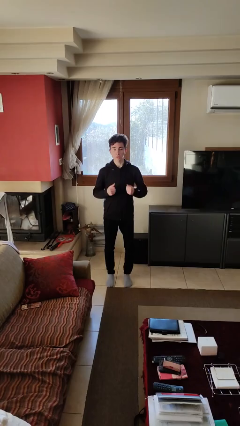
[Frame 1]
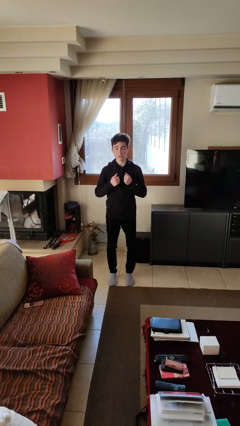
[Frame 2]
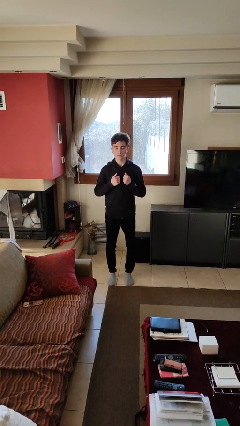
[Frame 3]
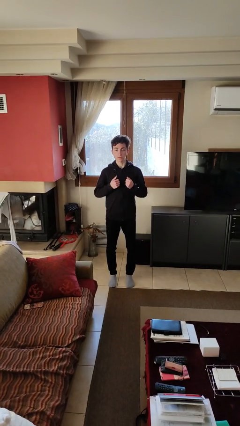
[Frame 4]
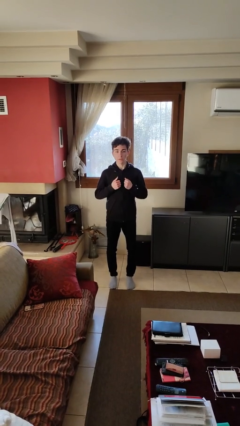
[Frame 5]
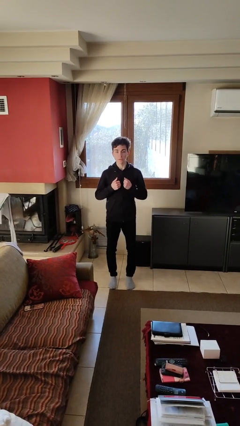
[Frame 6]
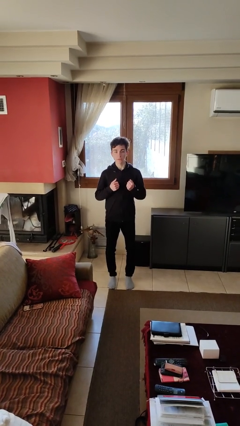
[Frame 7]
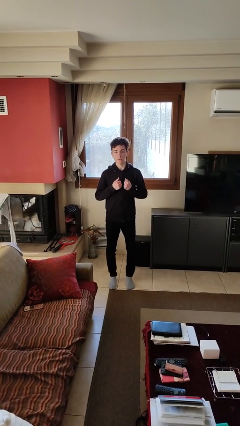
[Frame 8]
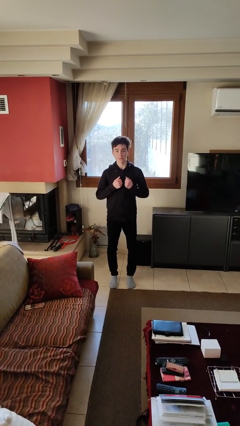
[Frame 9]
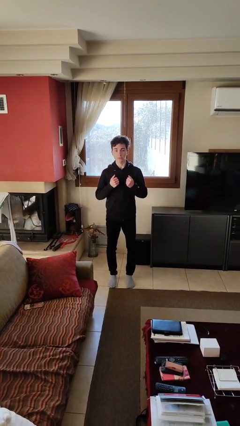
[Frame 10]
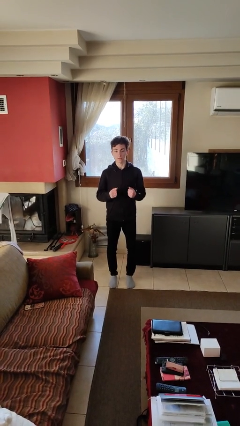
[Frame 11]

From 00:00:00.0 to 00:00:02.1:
person drums on chest

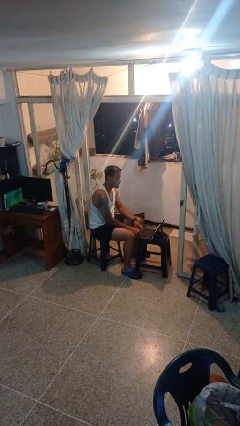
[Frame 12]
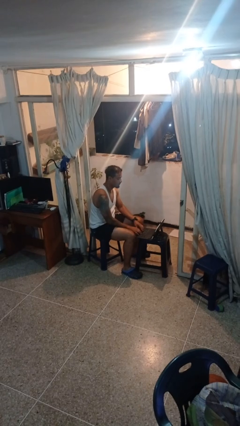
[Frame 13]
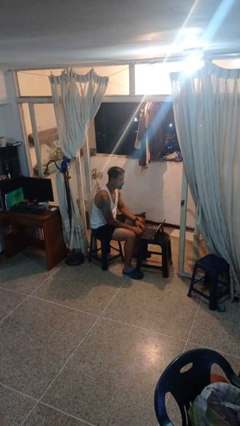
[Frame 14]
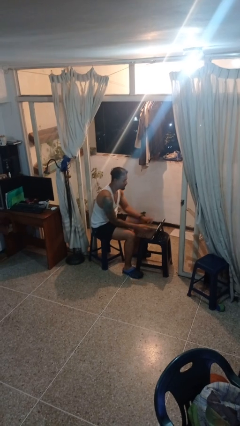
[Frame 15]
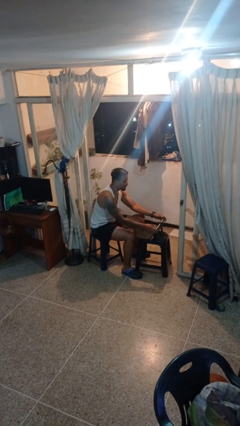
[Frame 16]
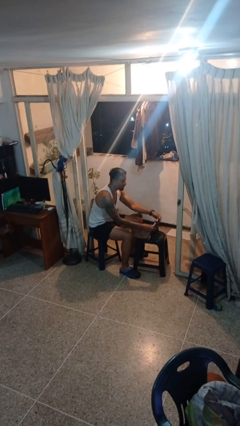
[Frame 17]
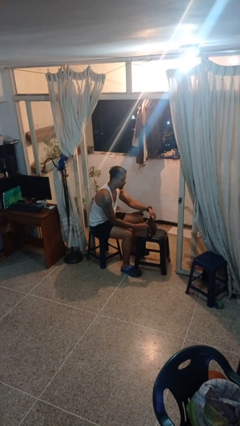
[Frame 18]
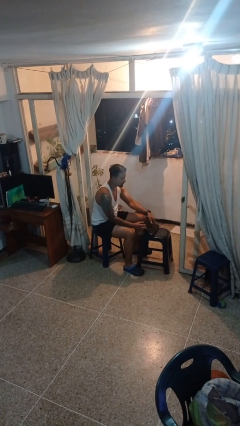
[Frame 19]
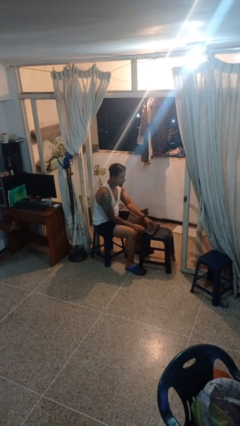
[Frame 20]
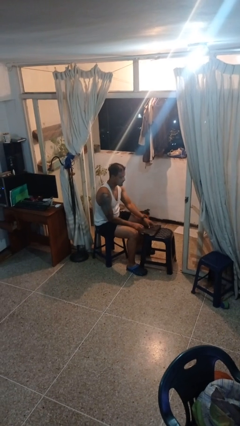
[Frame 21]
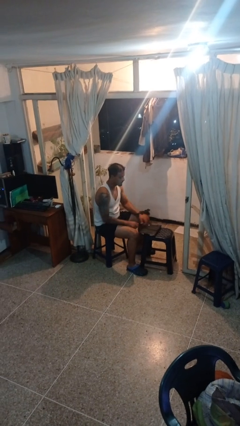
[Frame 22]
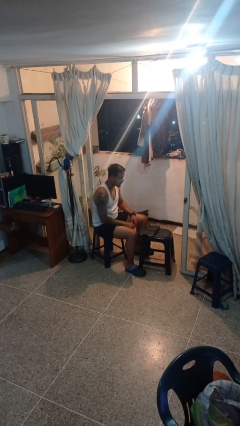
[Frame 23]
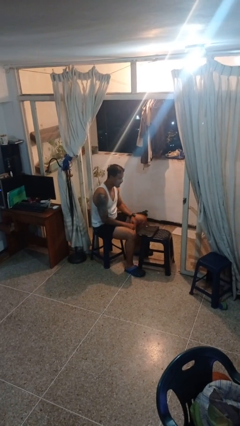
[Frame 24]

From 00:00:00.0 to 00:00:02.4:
person closes laptop

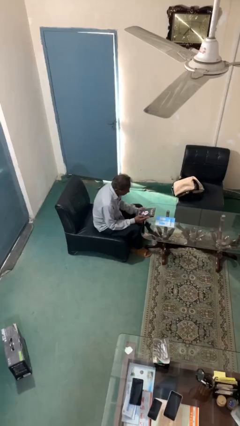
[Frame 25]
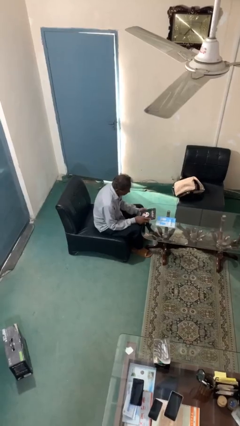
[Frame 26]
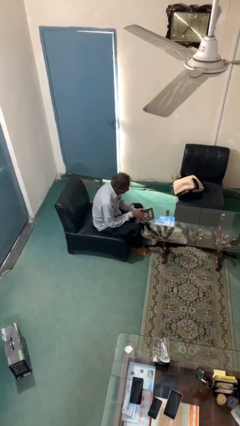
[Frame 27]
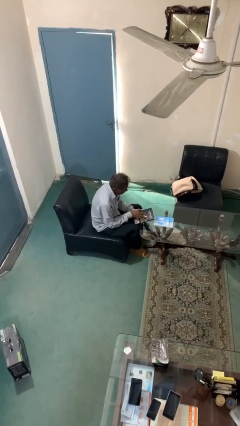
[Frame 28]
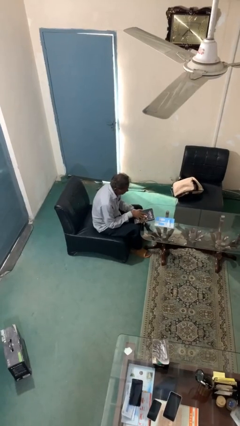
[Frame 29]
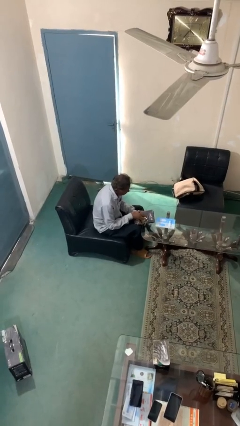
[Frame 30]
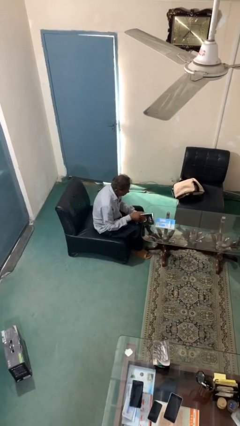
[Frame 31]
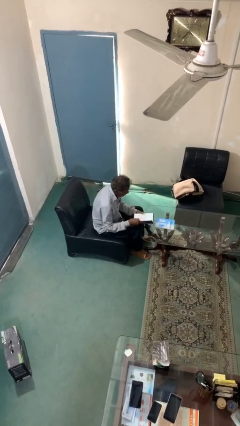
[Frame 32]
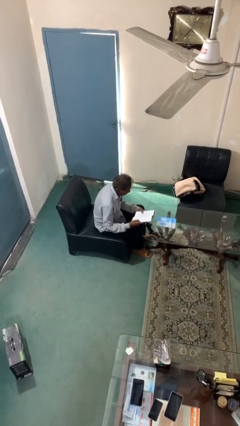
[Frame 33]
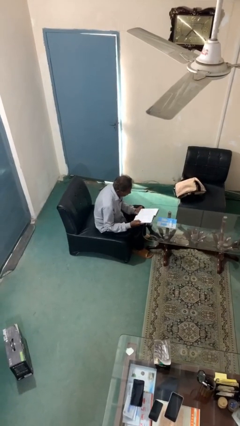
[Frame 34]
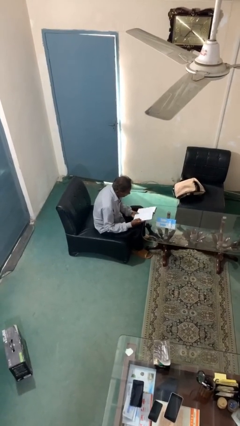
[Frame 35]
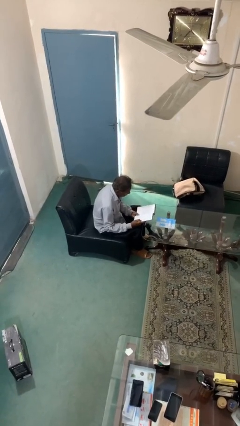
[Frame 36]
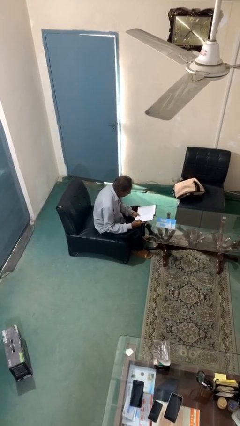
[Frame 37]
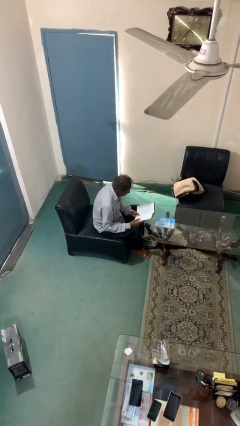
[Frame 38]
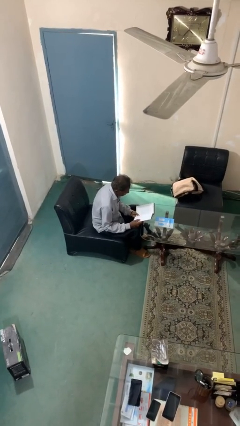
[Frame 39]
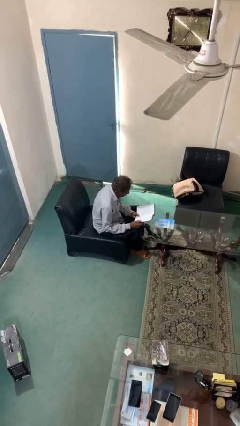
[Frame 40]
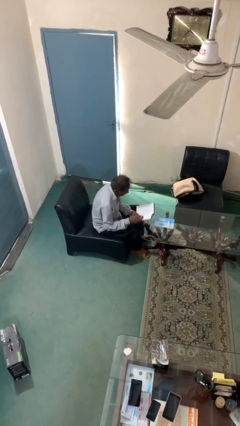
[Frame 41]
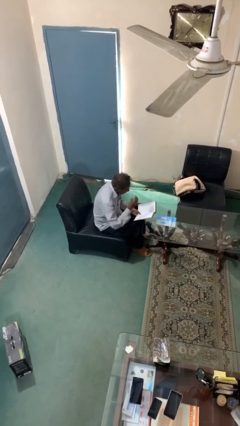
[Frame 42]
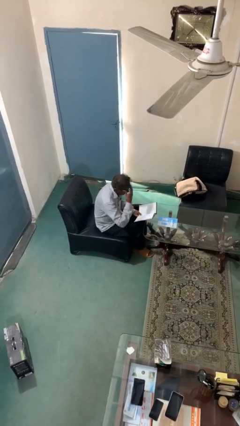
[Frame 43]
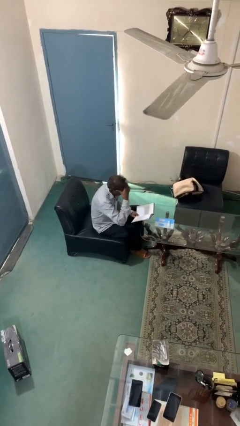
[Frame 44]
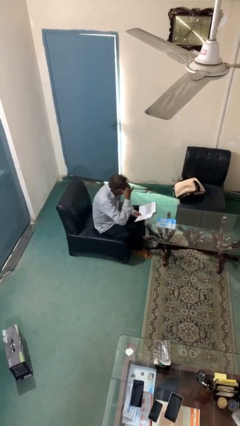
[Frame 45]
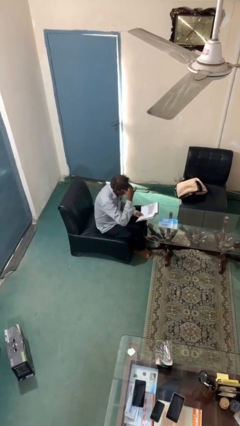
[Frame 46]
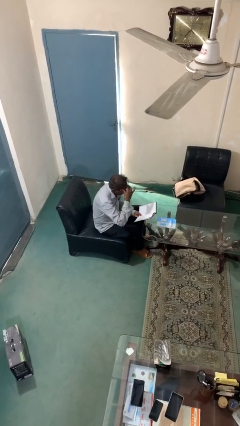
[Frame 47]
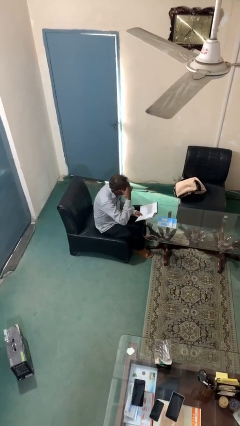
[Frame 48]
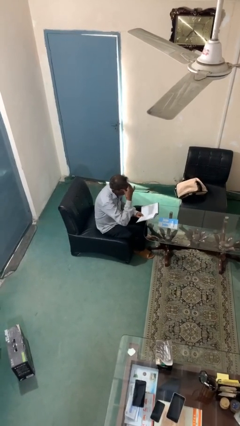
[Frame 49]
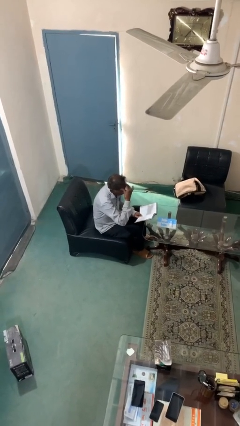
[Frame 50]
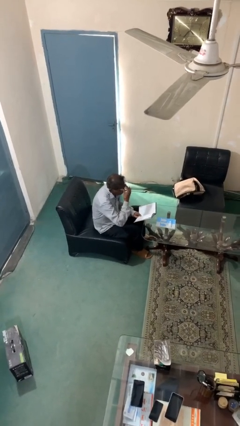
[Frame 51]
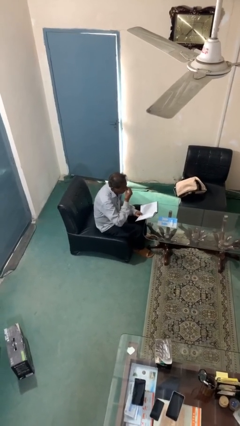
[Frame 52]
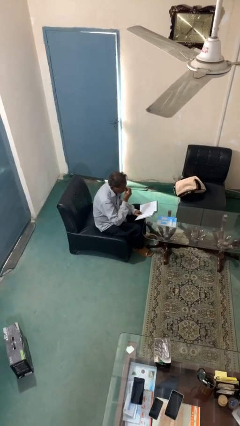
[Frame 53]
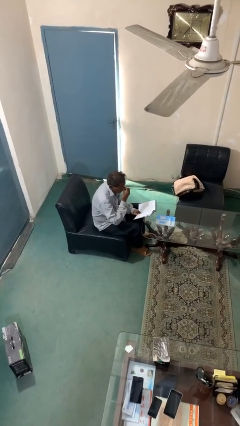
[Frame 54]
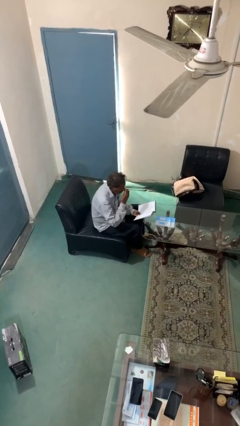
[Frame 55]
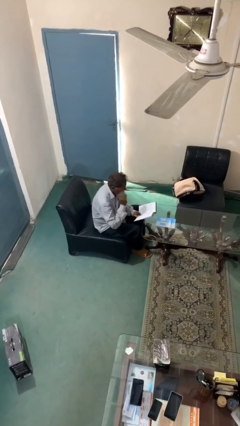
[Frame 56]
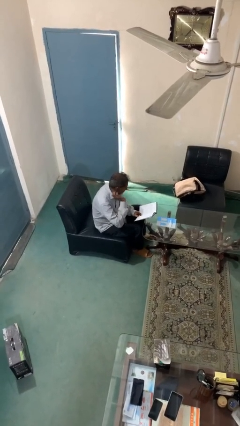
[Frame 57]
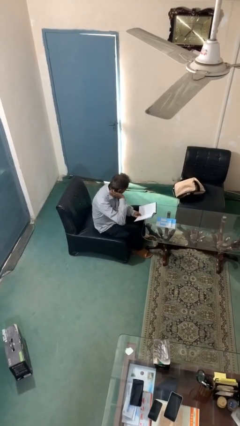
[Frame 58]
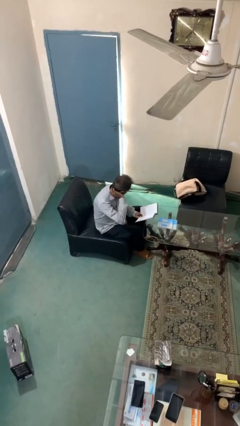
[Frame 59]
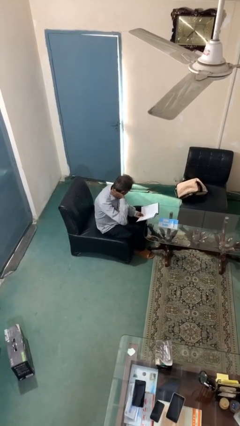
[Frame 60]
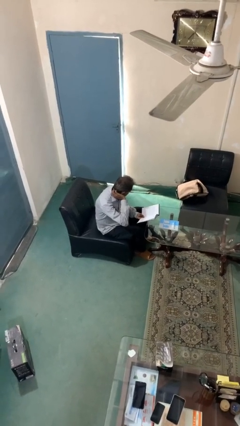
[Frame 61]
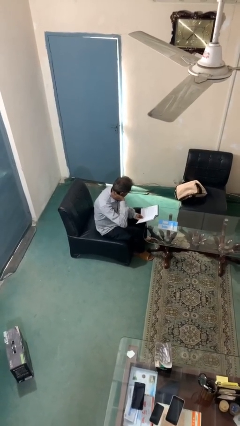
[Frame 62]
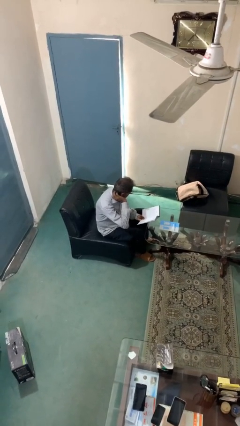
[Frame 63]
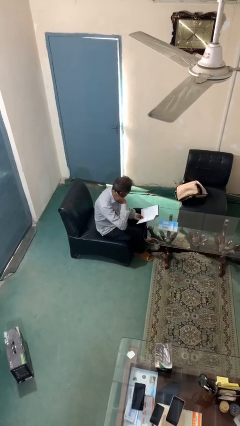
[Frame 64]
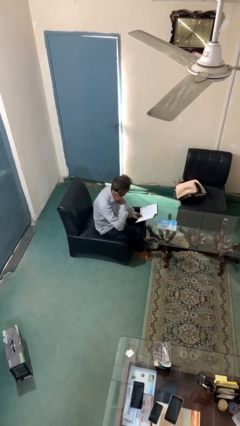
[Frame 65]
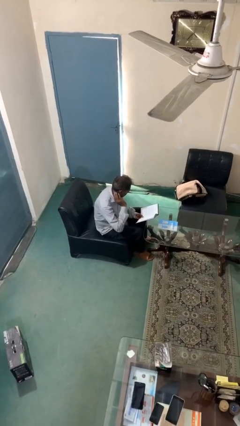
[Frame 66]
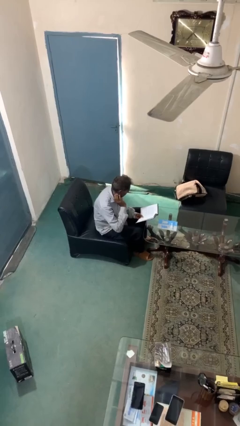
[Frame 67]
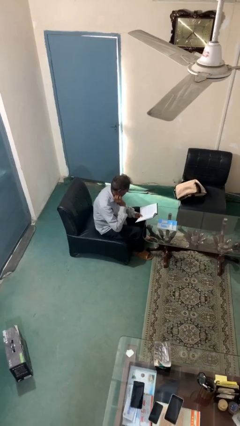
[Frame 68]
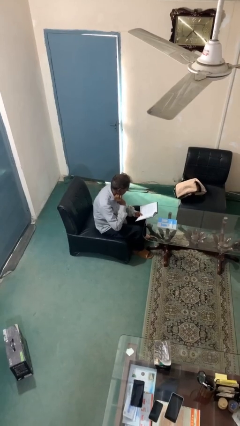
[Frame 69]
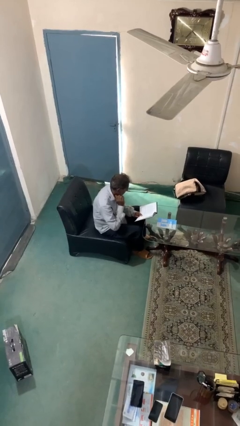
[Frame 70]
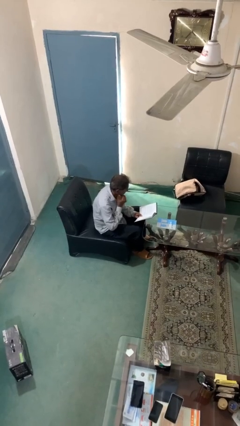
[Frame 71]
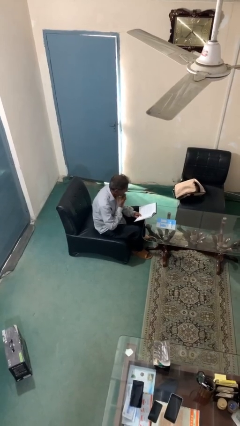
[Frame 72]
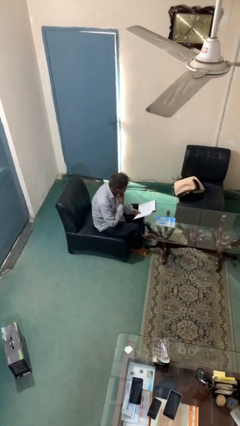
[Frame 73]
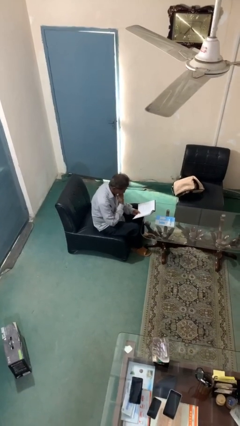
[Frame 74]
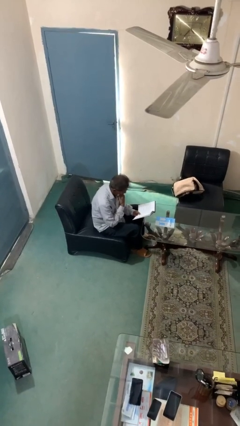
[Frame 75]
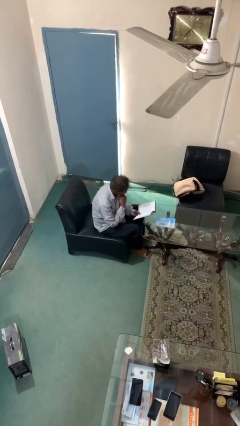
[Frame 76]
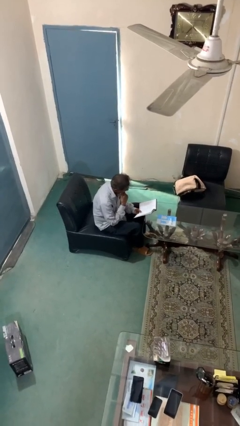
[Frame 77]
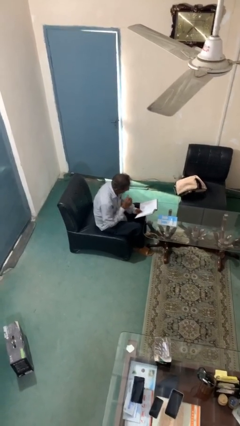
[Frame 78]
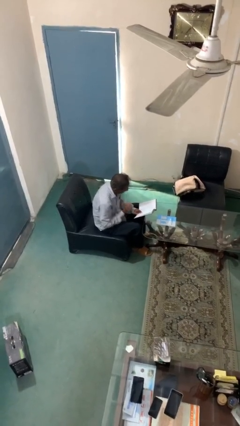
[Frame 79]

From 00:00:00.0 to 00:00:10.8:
person reads document

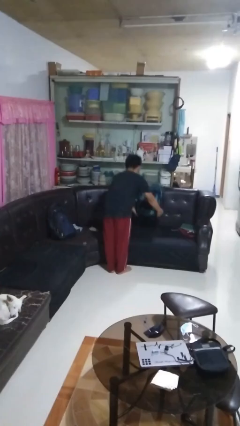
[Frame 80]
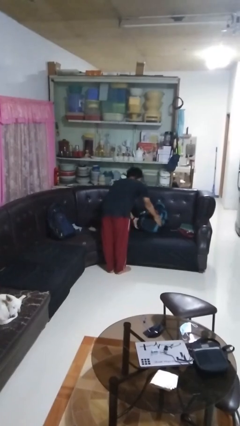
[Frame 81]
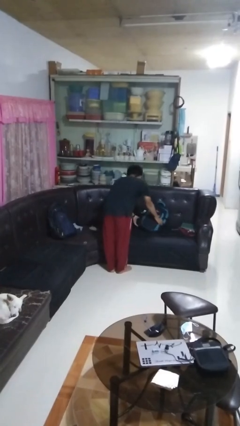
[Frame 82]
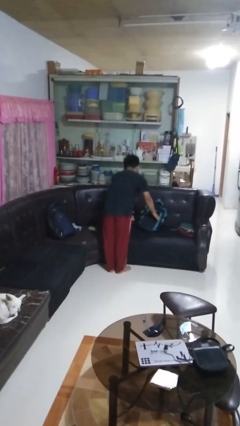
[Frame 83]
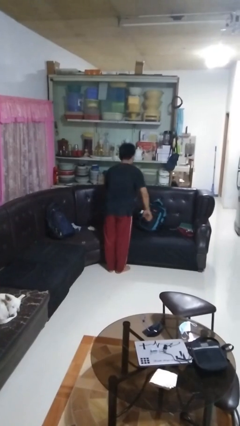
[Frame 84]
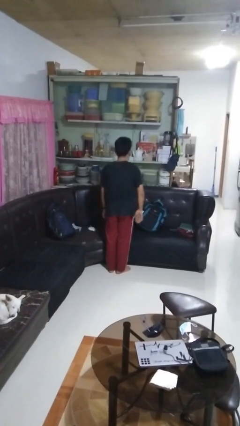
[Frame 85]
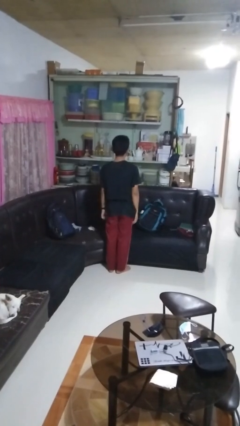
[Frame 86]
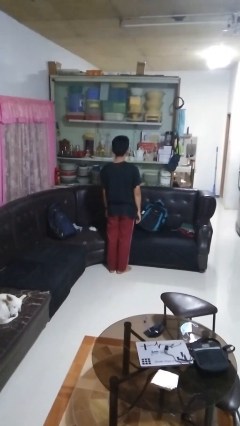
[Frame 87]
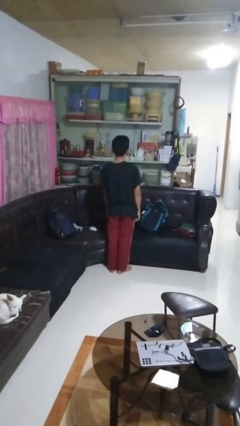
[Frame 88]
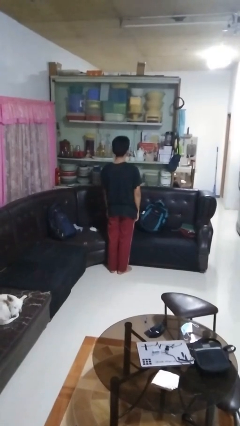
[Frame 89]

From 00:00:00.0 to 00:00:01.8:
person puts down object on couch

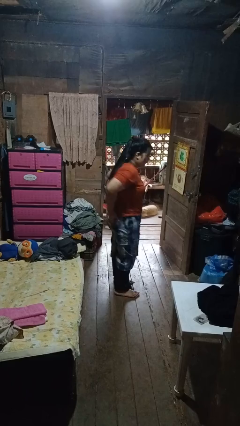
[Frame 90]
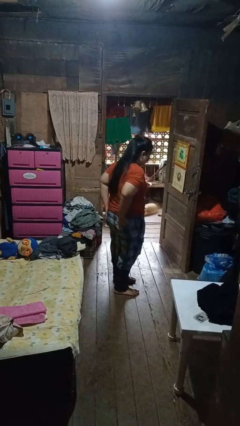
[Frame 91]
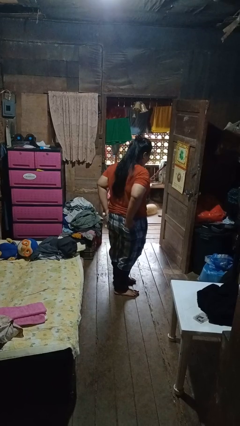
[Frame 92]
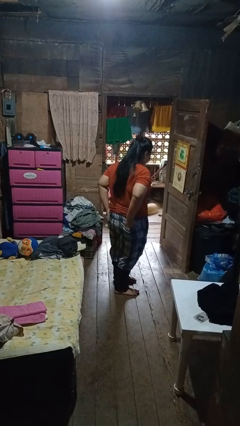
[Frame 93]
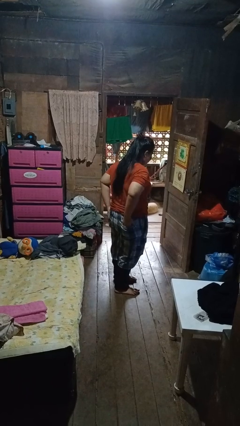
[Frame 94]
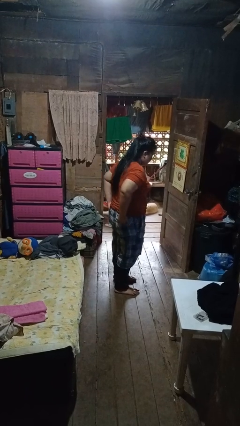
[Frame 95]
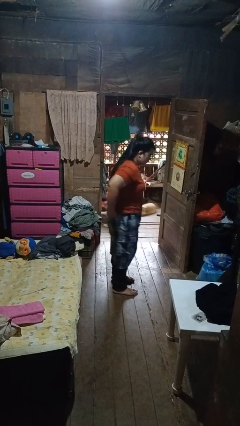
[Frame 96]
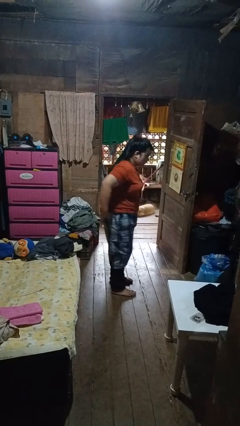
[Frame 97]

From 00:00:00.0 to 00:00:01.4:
person puts hands in back pockets
